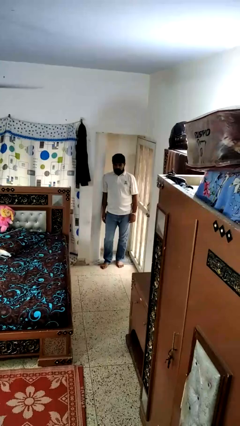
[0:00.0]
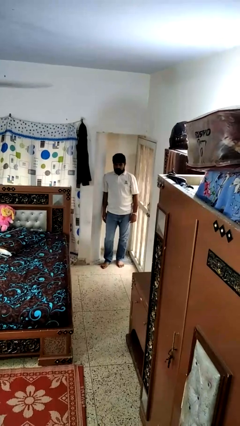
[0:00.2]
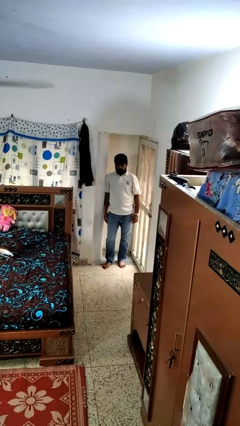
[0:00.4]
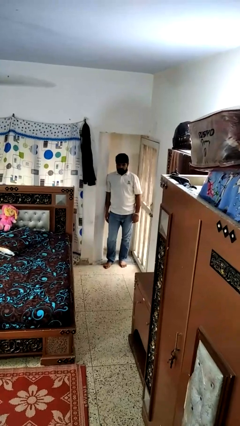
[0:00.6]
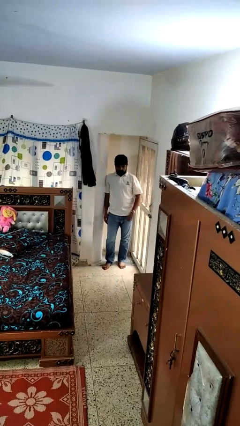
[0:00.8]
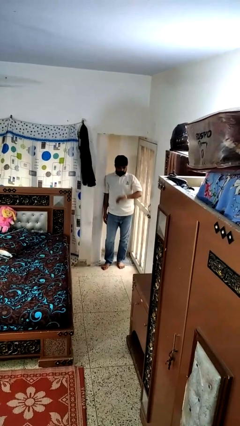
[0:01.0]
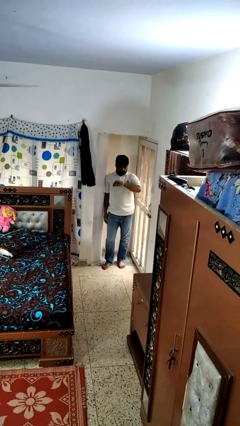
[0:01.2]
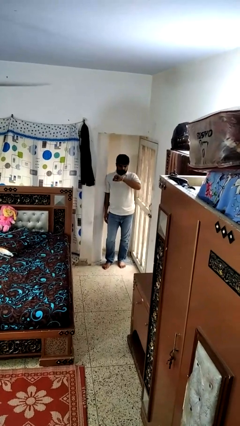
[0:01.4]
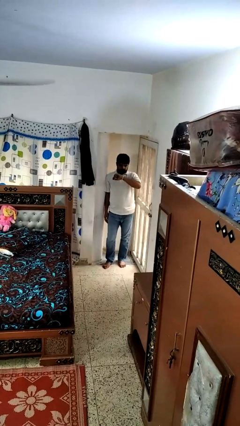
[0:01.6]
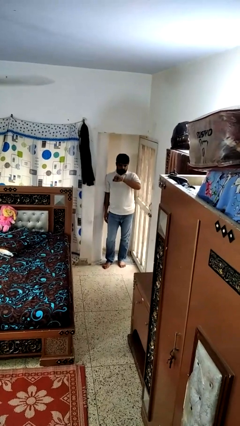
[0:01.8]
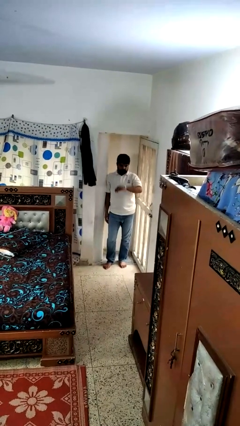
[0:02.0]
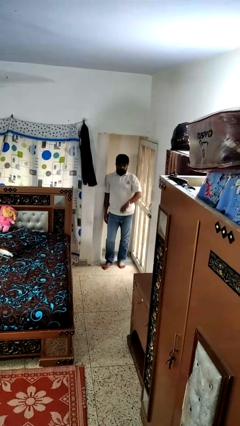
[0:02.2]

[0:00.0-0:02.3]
person looks at wristwatch

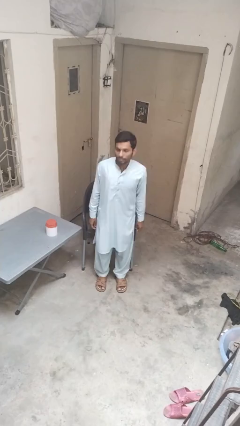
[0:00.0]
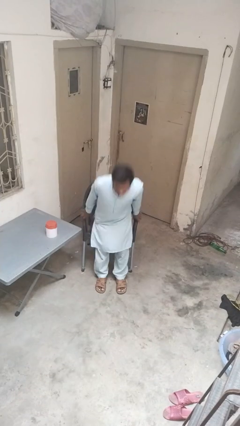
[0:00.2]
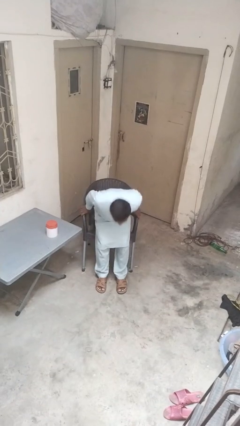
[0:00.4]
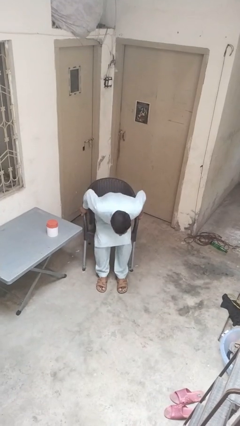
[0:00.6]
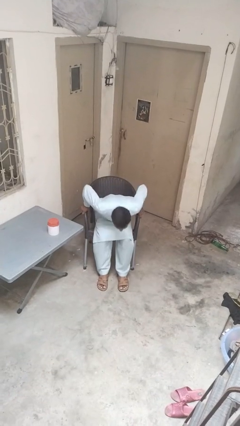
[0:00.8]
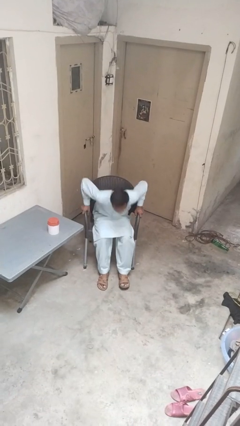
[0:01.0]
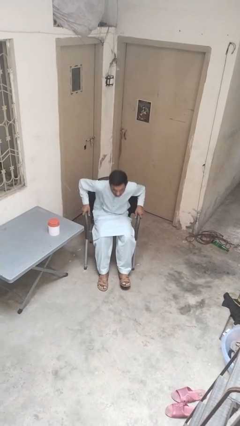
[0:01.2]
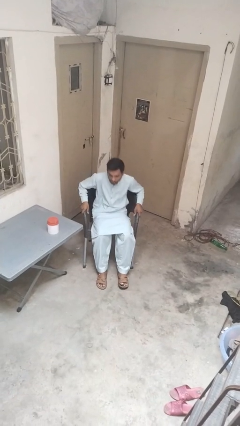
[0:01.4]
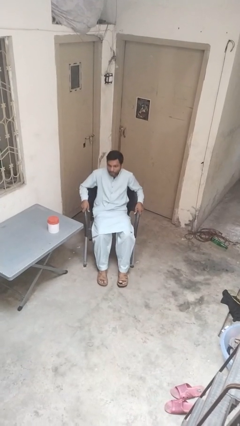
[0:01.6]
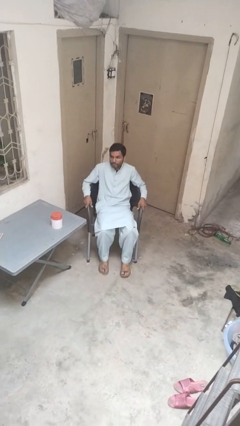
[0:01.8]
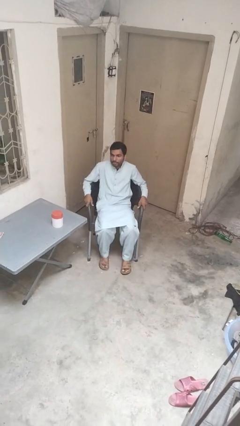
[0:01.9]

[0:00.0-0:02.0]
person sits down

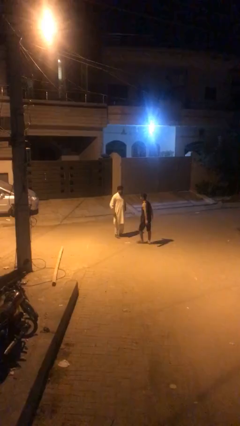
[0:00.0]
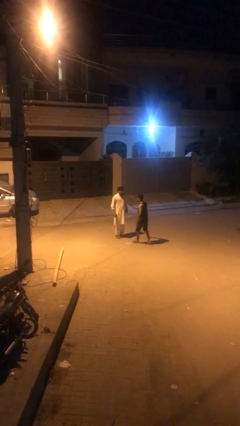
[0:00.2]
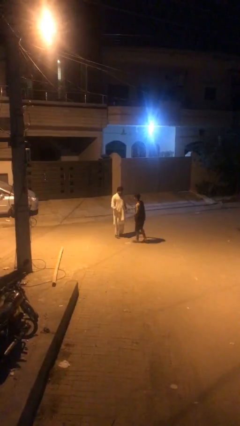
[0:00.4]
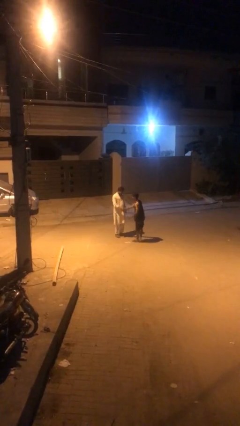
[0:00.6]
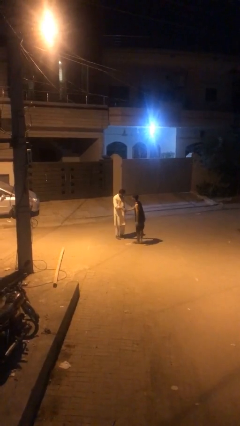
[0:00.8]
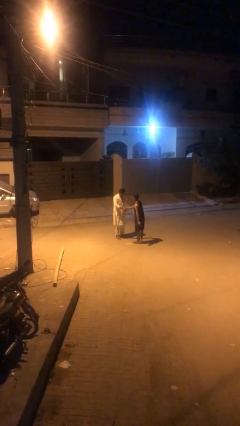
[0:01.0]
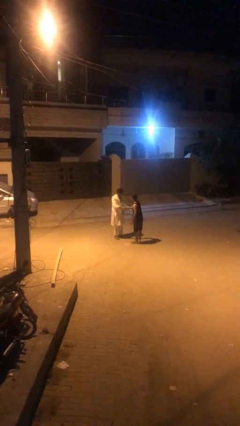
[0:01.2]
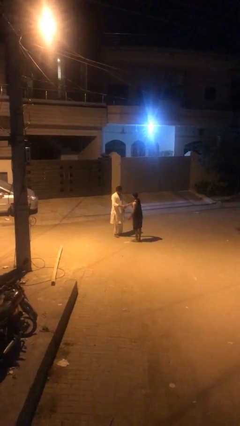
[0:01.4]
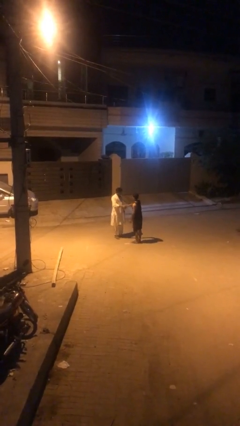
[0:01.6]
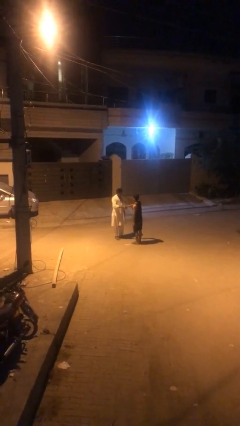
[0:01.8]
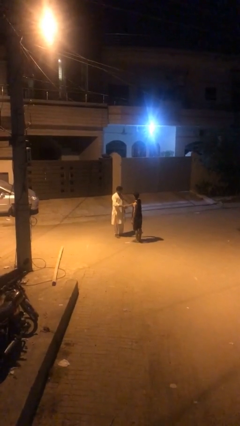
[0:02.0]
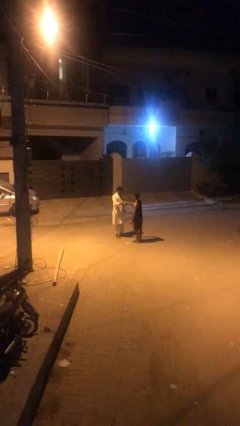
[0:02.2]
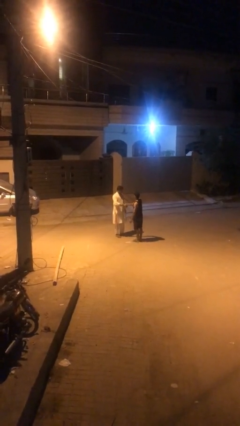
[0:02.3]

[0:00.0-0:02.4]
person shakes hand

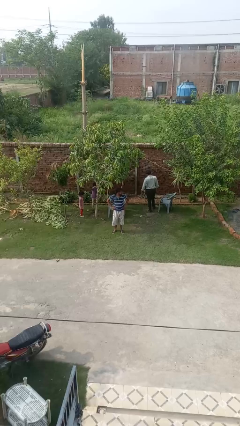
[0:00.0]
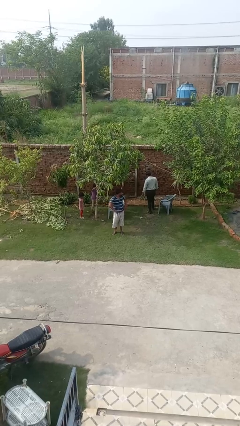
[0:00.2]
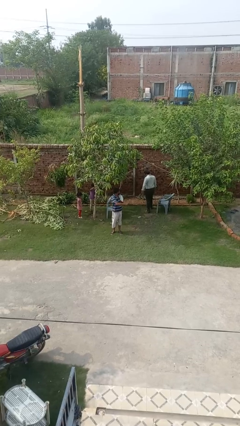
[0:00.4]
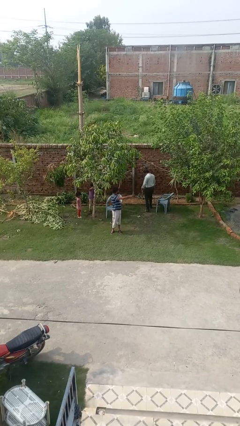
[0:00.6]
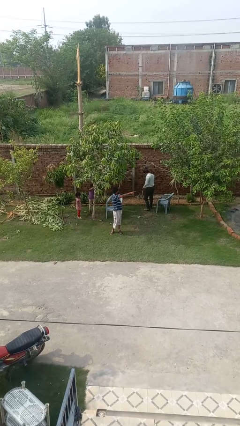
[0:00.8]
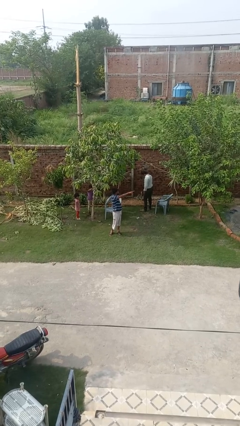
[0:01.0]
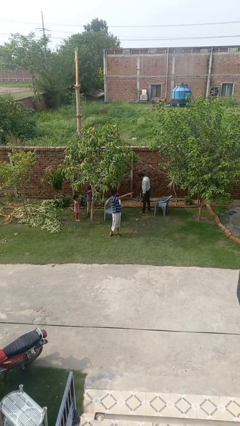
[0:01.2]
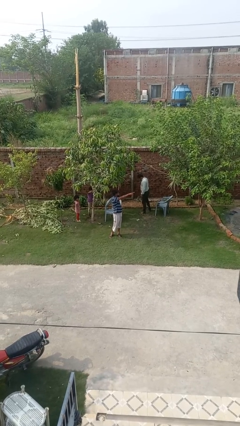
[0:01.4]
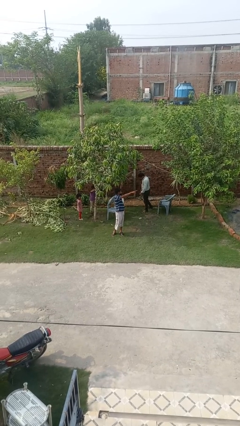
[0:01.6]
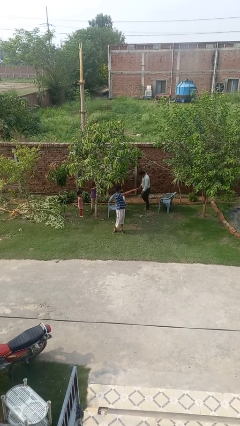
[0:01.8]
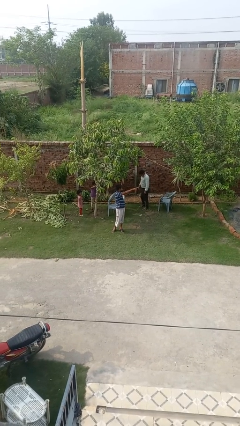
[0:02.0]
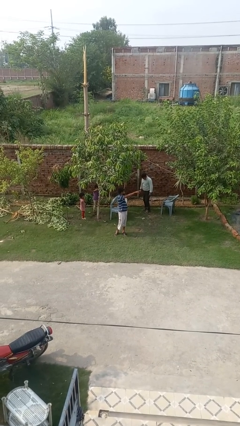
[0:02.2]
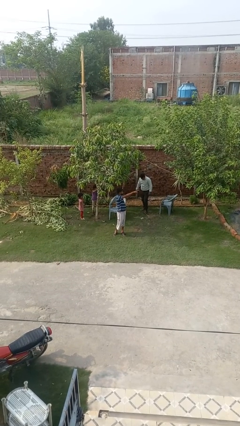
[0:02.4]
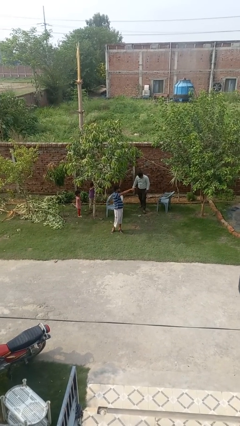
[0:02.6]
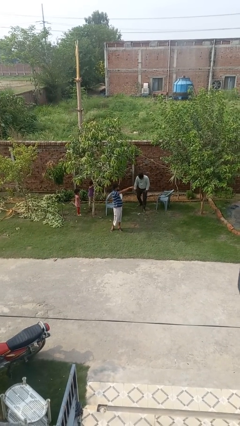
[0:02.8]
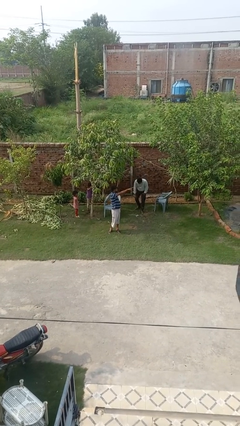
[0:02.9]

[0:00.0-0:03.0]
person points at person

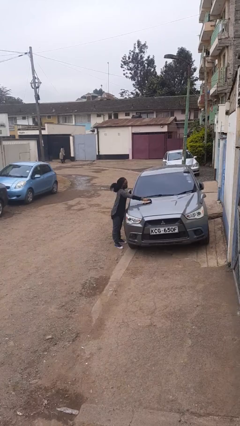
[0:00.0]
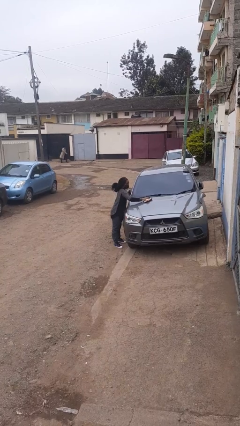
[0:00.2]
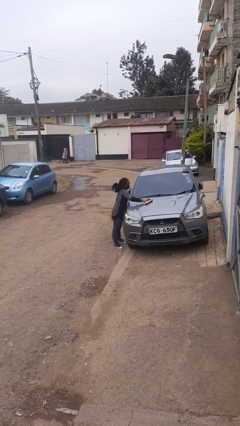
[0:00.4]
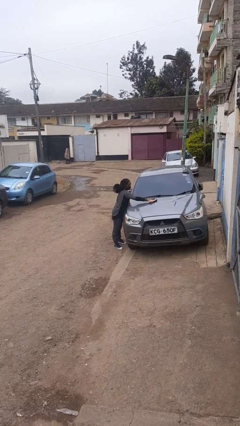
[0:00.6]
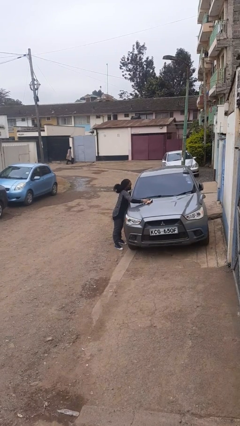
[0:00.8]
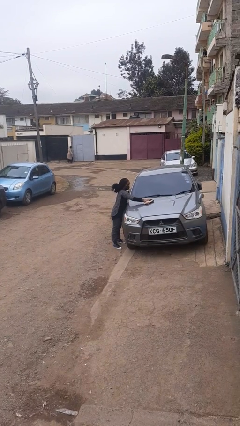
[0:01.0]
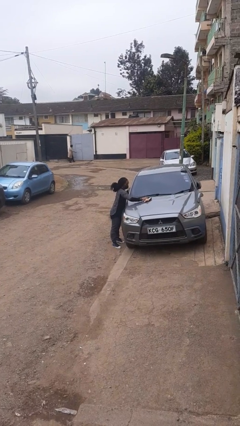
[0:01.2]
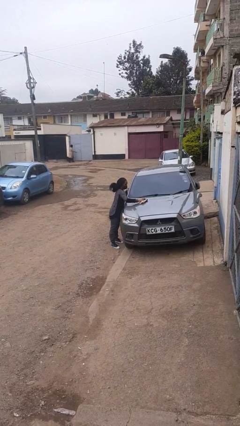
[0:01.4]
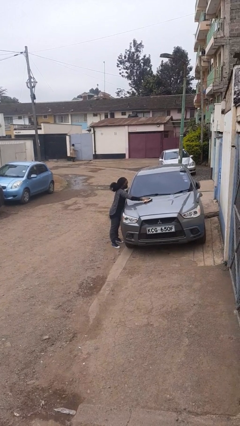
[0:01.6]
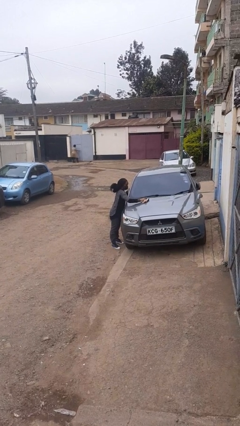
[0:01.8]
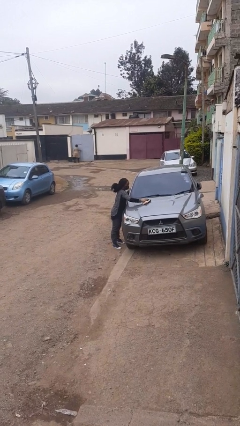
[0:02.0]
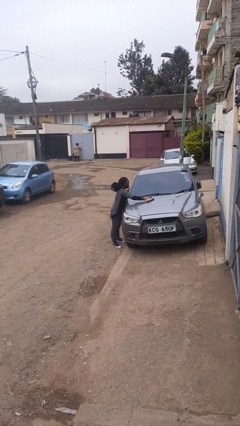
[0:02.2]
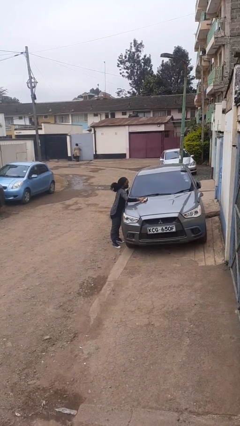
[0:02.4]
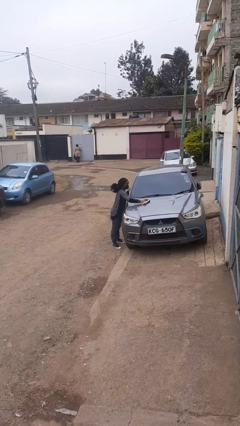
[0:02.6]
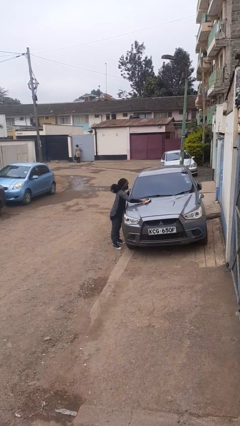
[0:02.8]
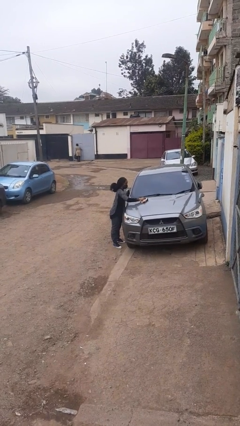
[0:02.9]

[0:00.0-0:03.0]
person polishes car with rag

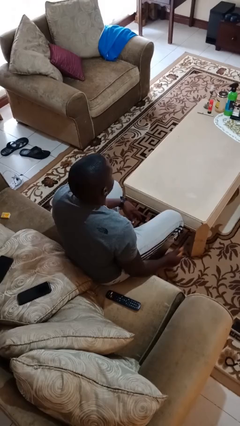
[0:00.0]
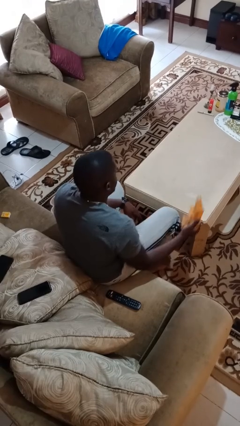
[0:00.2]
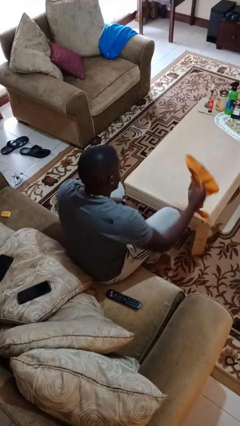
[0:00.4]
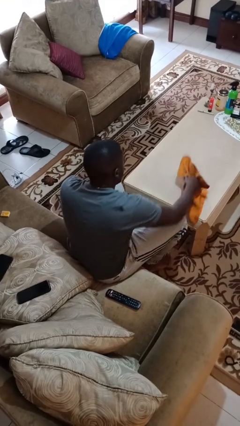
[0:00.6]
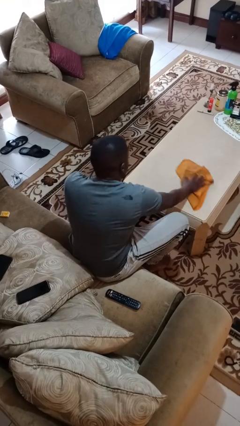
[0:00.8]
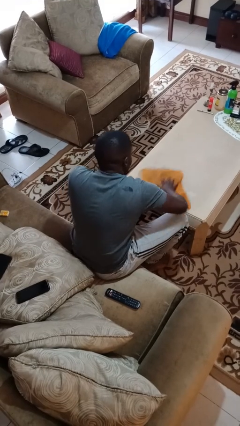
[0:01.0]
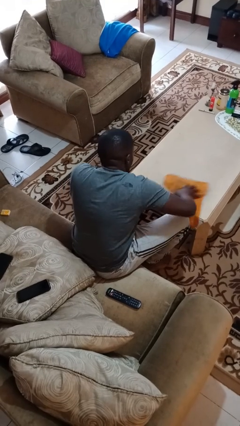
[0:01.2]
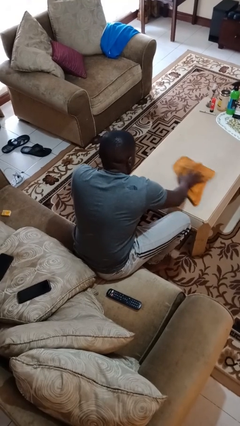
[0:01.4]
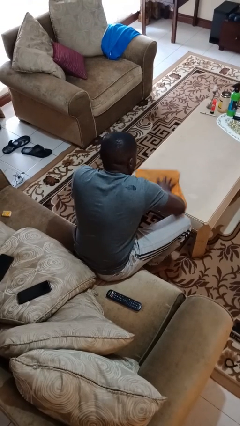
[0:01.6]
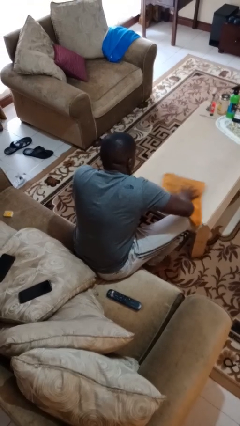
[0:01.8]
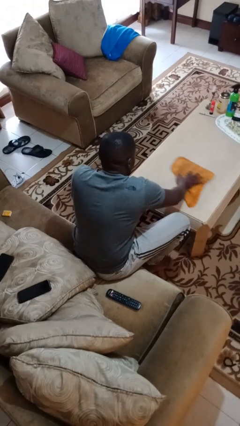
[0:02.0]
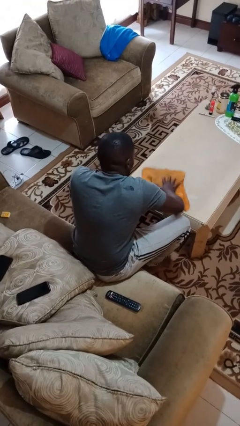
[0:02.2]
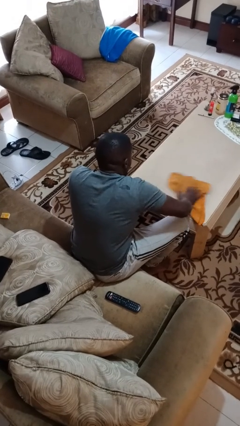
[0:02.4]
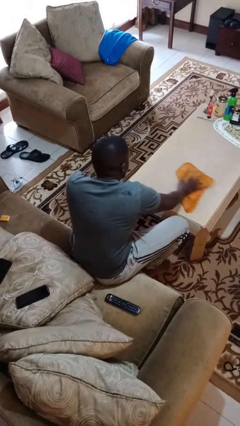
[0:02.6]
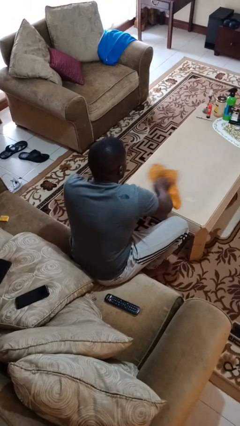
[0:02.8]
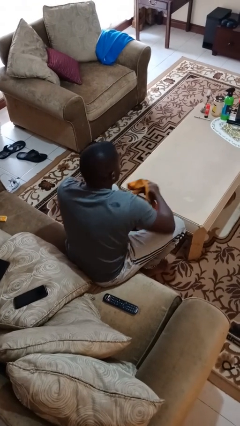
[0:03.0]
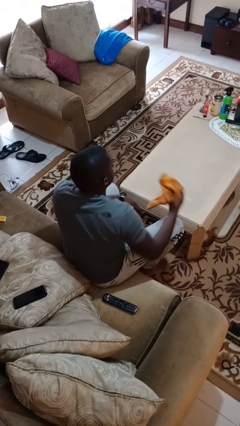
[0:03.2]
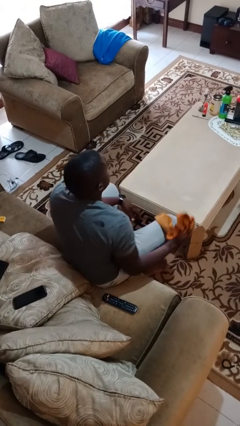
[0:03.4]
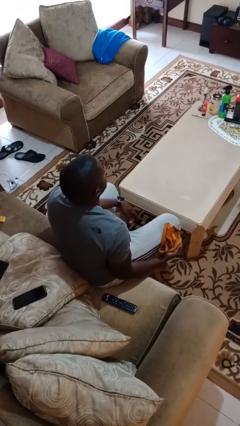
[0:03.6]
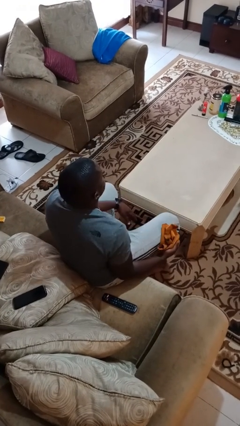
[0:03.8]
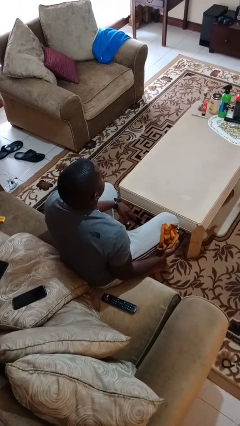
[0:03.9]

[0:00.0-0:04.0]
person cleans table with rag

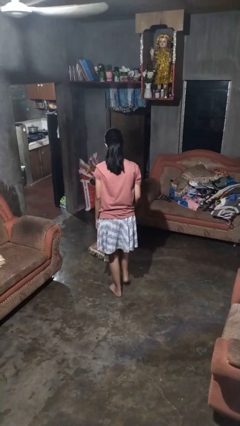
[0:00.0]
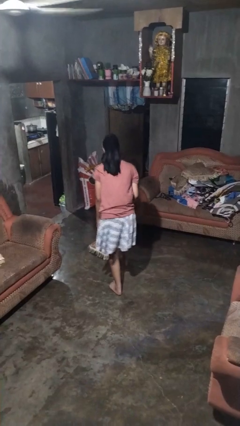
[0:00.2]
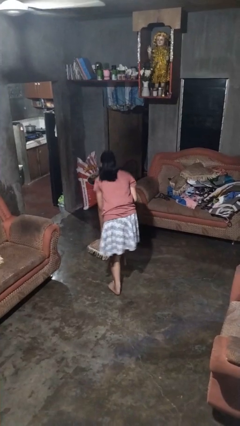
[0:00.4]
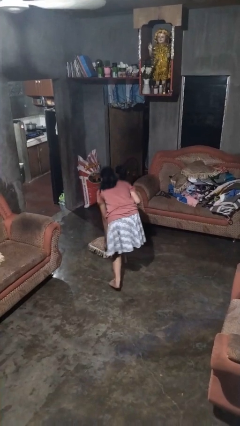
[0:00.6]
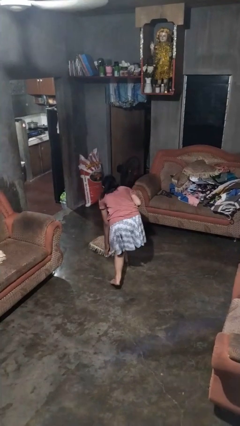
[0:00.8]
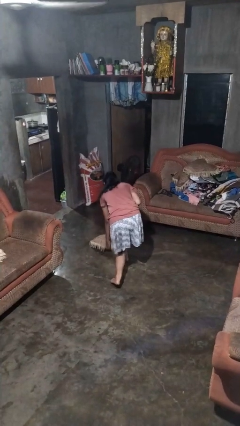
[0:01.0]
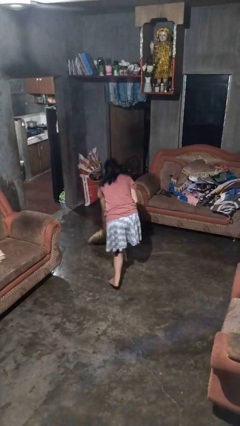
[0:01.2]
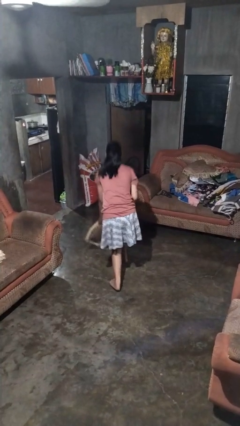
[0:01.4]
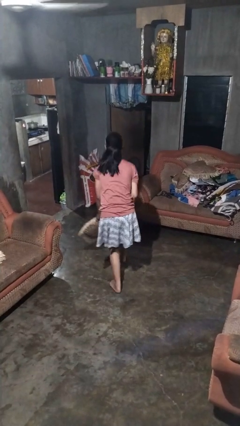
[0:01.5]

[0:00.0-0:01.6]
person picks up object from floor
